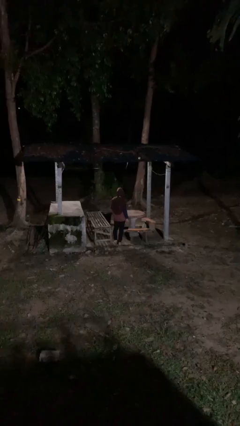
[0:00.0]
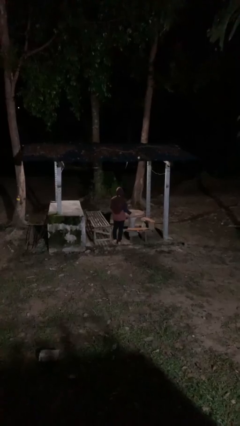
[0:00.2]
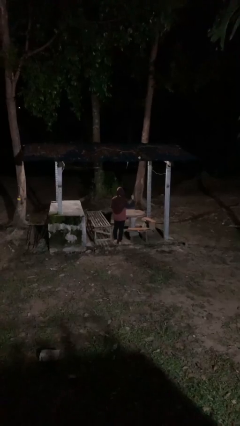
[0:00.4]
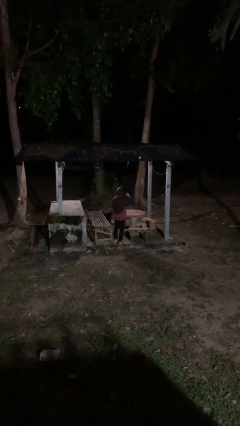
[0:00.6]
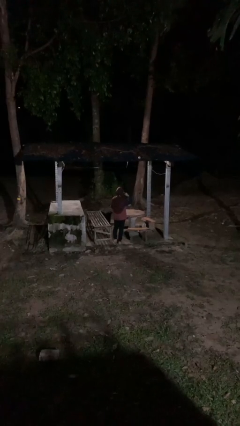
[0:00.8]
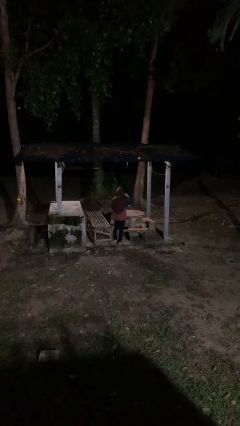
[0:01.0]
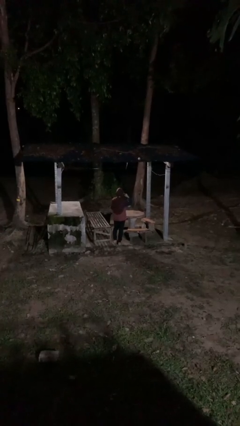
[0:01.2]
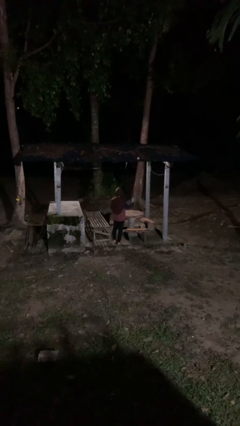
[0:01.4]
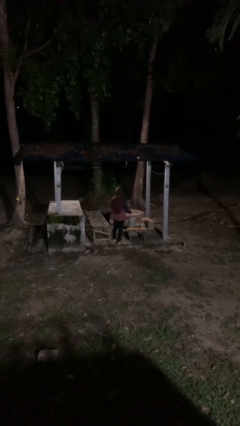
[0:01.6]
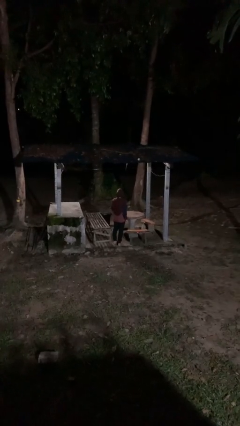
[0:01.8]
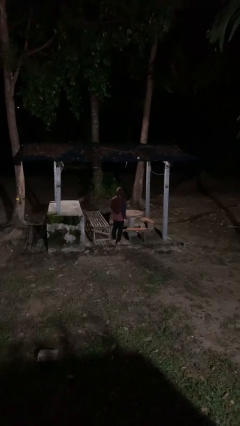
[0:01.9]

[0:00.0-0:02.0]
person gestures listen closely

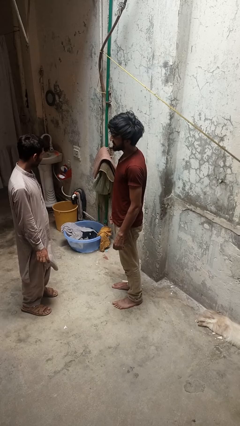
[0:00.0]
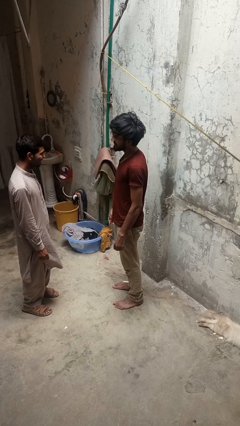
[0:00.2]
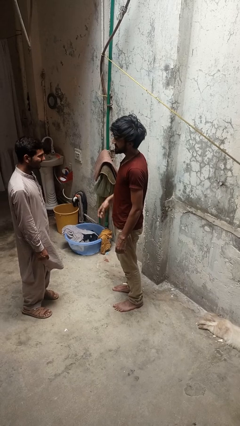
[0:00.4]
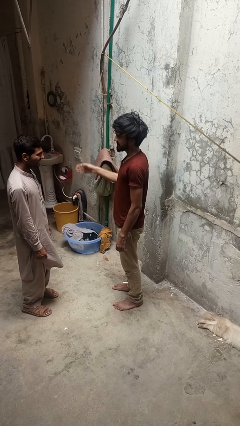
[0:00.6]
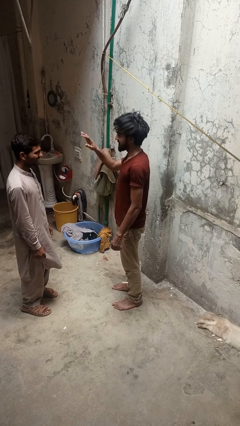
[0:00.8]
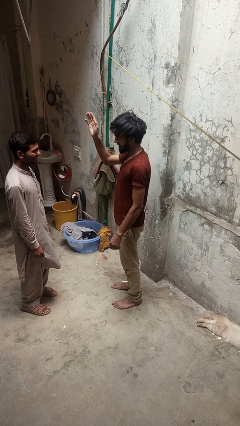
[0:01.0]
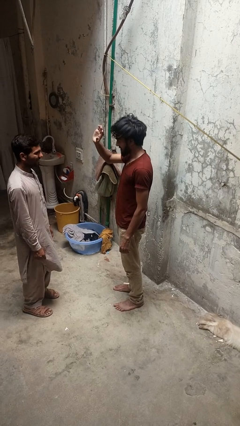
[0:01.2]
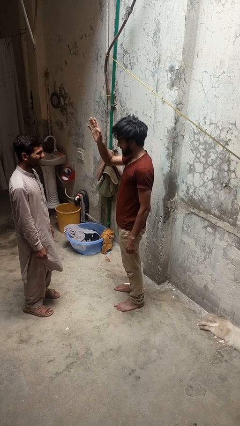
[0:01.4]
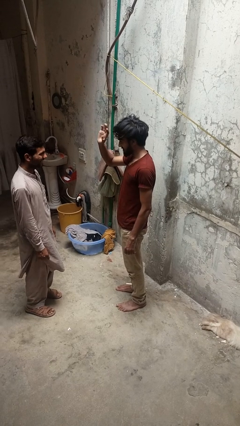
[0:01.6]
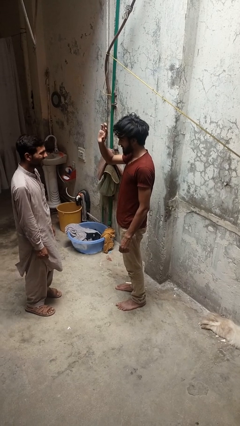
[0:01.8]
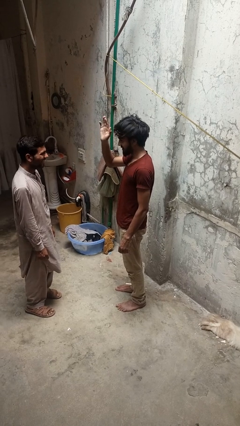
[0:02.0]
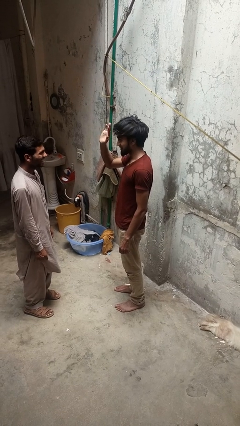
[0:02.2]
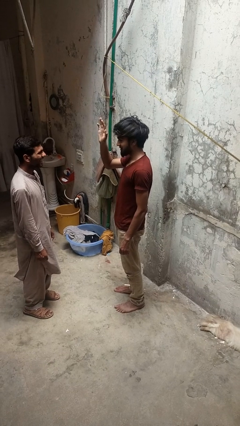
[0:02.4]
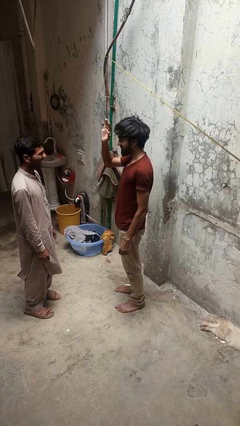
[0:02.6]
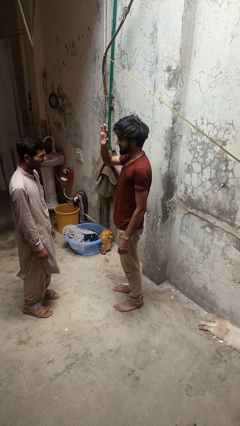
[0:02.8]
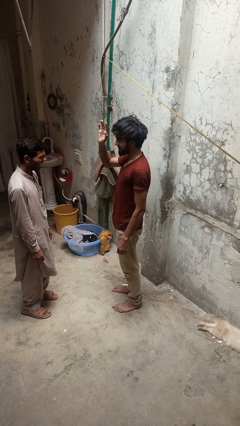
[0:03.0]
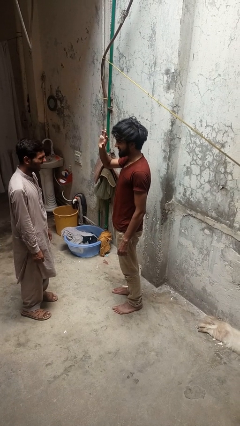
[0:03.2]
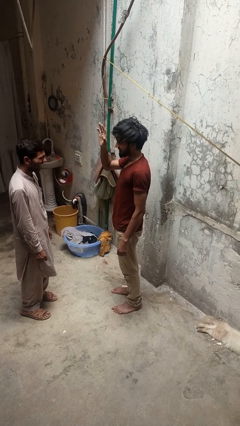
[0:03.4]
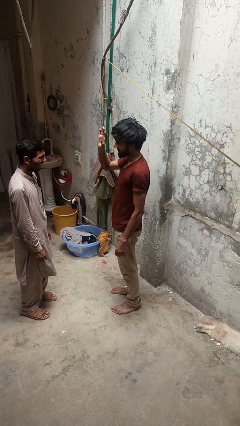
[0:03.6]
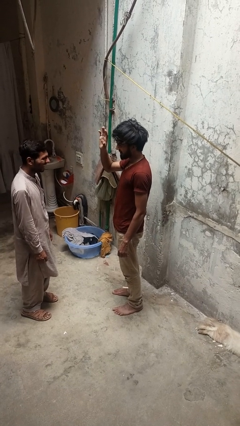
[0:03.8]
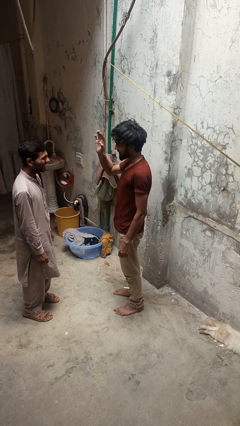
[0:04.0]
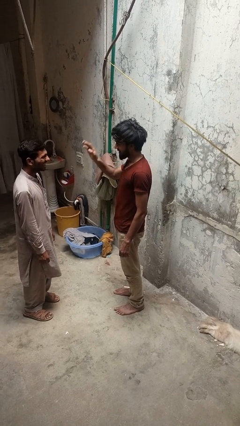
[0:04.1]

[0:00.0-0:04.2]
person waves at person

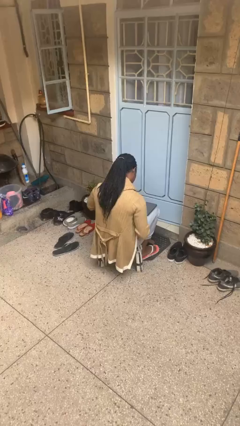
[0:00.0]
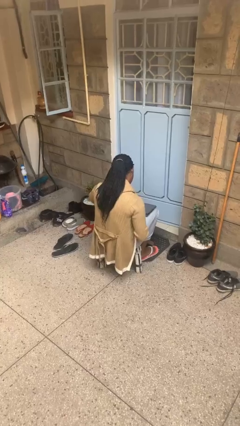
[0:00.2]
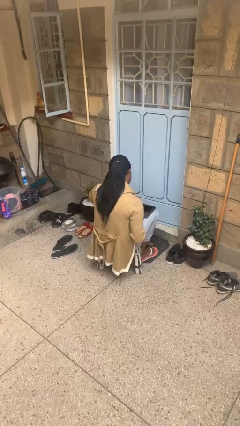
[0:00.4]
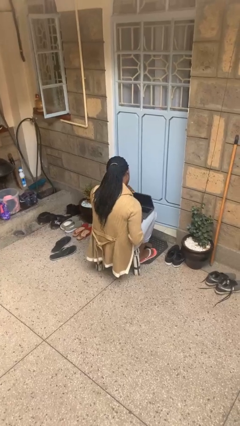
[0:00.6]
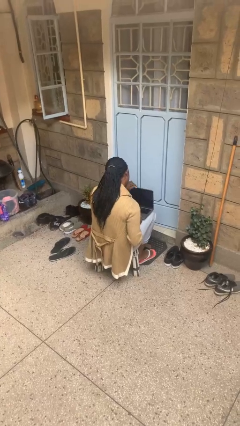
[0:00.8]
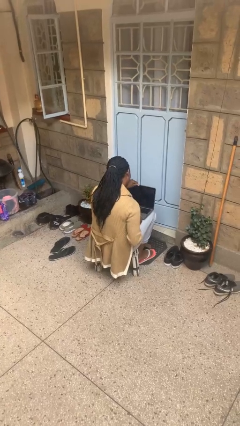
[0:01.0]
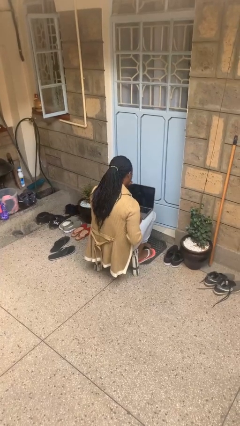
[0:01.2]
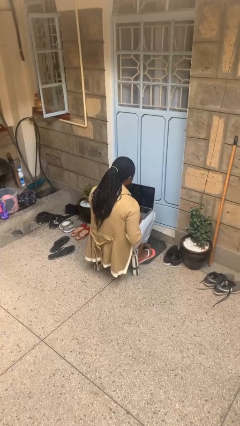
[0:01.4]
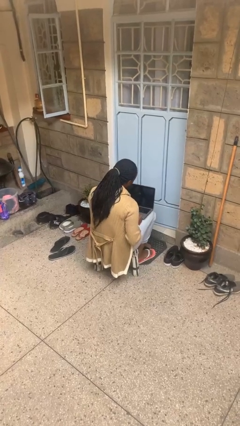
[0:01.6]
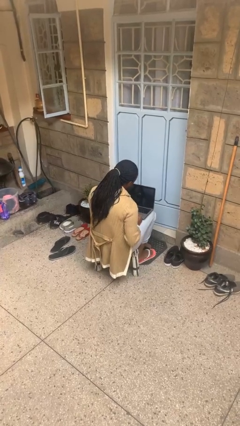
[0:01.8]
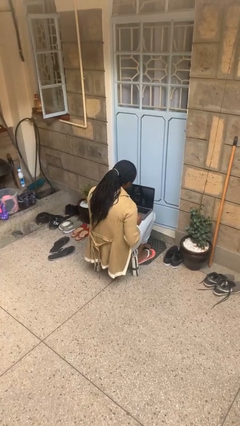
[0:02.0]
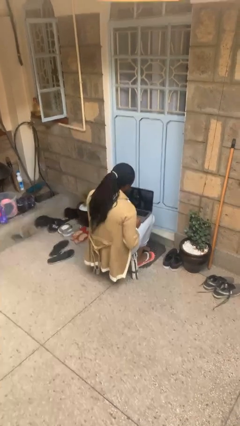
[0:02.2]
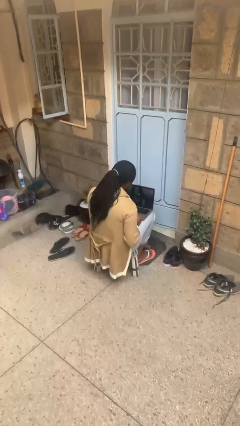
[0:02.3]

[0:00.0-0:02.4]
person opens laptop

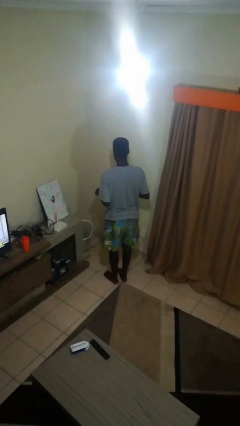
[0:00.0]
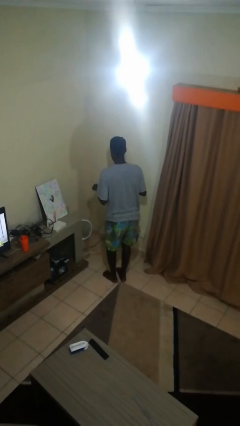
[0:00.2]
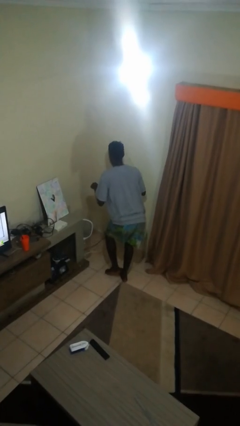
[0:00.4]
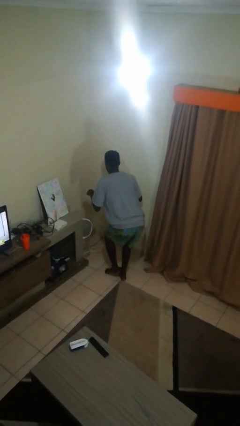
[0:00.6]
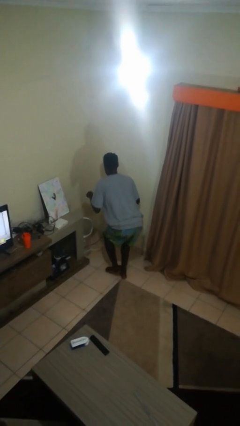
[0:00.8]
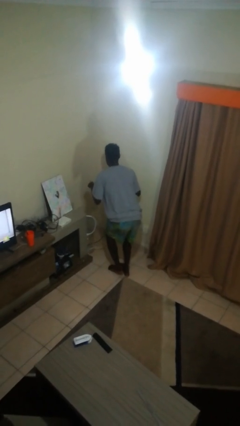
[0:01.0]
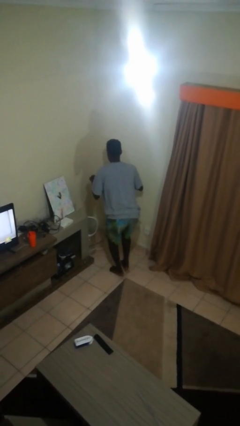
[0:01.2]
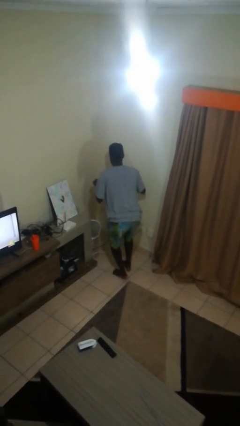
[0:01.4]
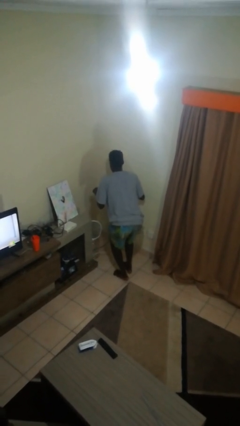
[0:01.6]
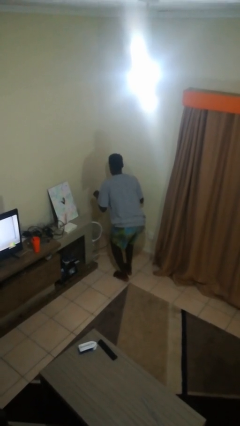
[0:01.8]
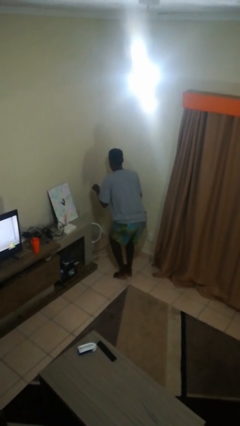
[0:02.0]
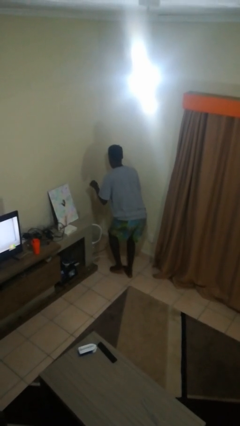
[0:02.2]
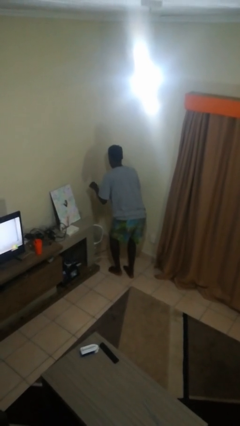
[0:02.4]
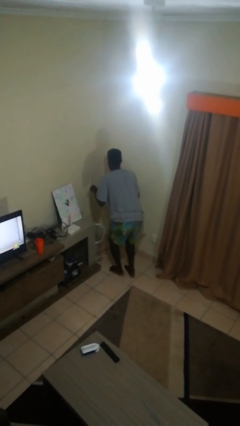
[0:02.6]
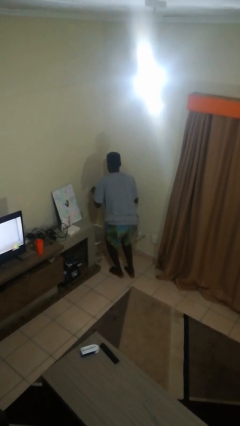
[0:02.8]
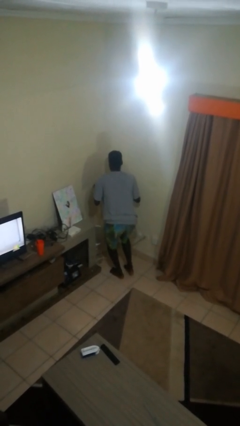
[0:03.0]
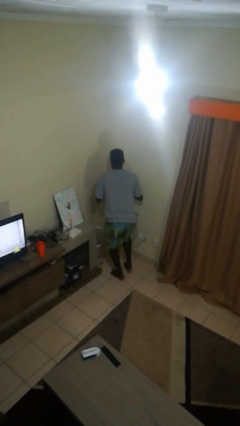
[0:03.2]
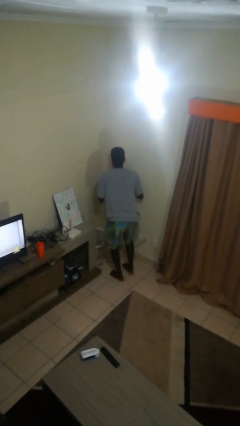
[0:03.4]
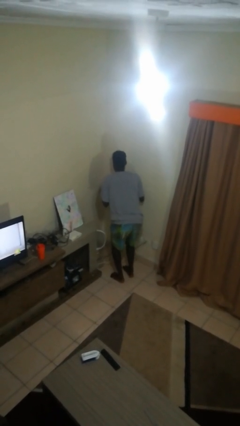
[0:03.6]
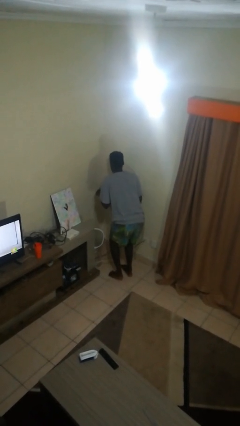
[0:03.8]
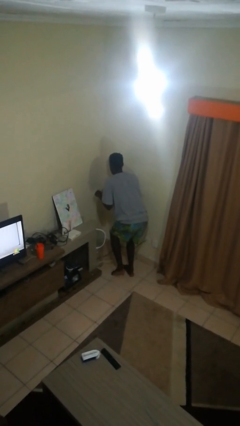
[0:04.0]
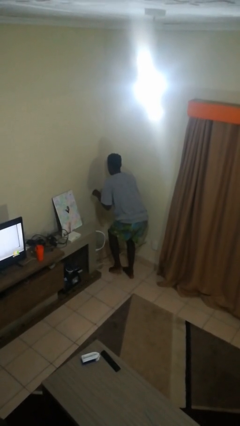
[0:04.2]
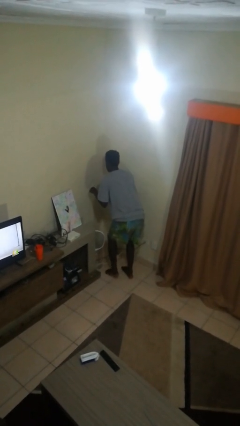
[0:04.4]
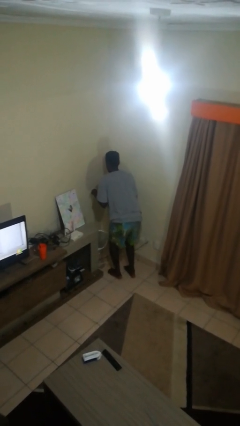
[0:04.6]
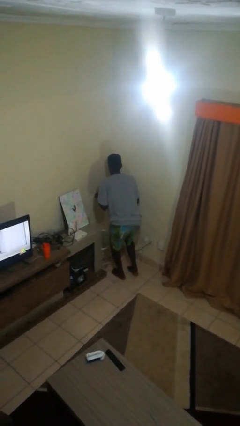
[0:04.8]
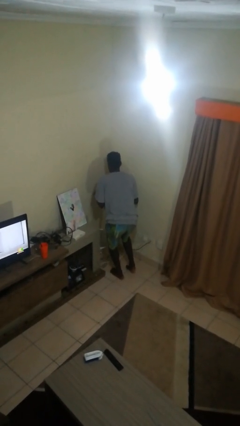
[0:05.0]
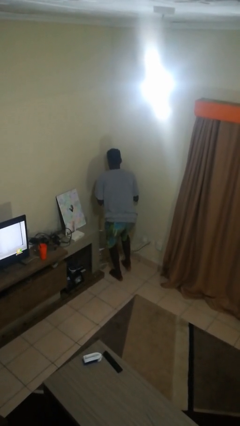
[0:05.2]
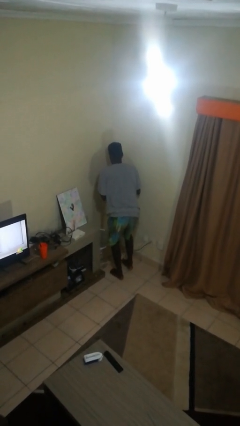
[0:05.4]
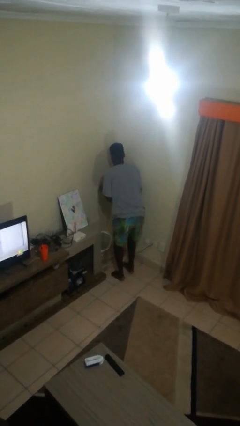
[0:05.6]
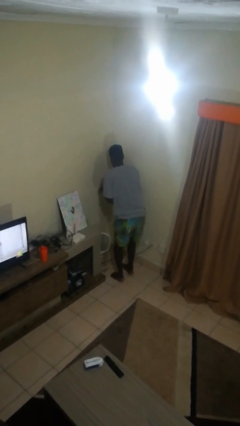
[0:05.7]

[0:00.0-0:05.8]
person walks tiptoe

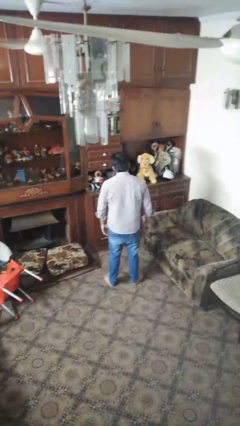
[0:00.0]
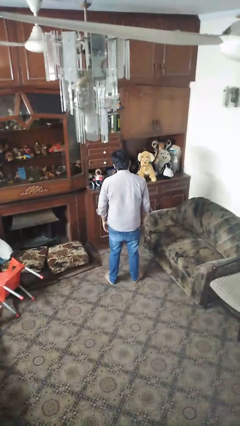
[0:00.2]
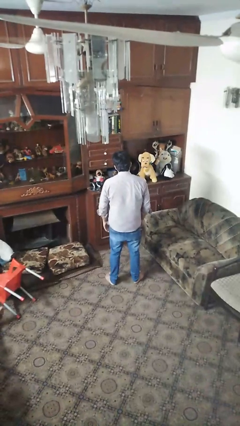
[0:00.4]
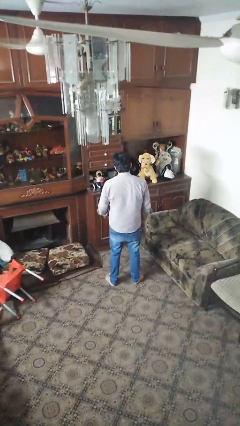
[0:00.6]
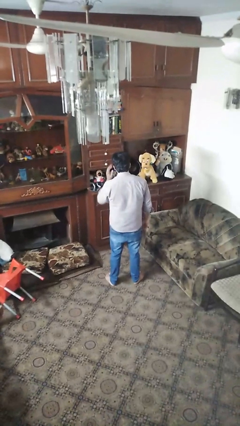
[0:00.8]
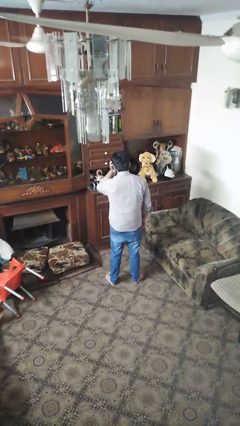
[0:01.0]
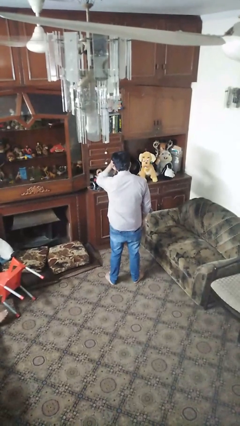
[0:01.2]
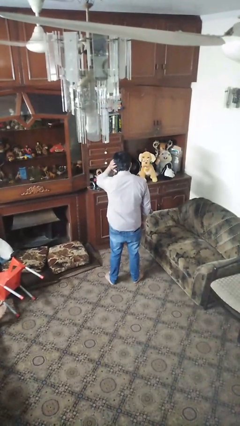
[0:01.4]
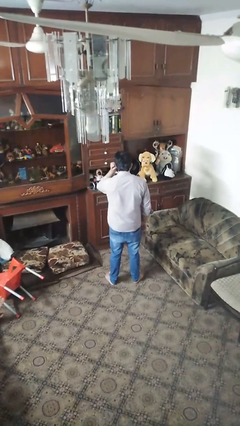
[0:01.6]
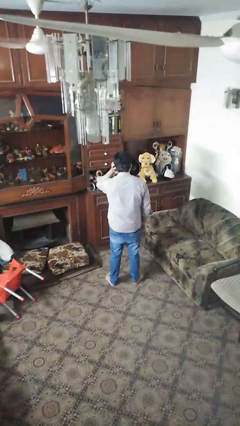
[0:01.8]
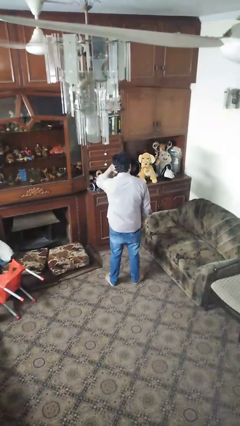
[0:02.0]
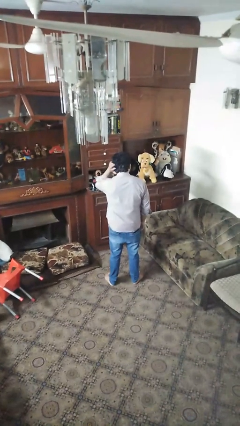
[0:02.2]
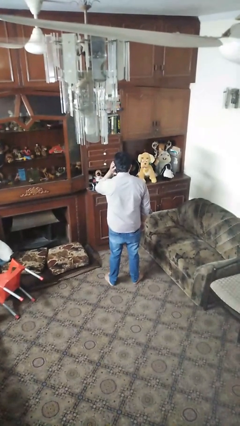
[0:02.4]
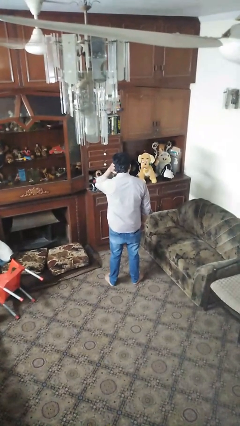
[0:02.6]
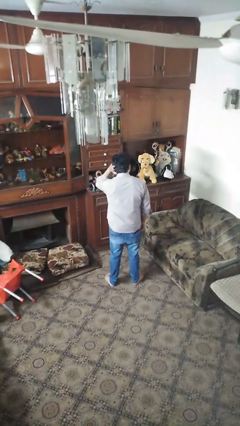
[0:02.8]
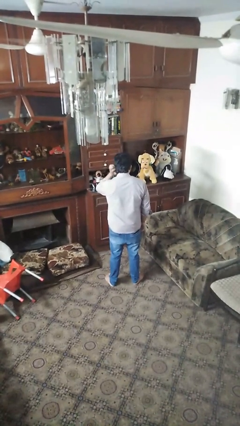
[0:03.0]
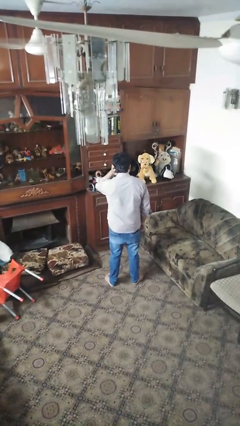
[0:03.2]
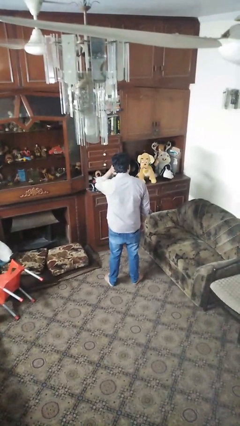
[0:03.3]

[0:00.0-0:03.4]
person strokes hair
